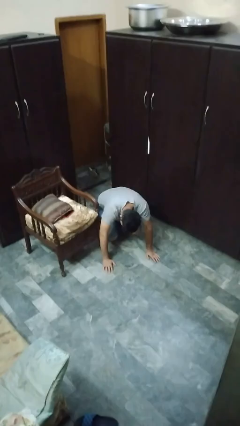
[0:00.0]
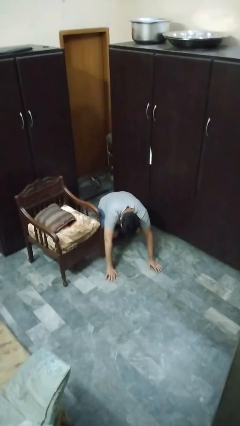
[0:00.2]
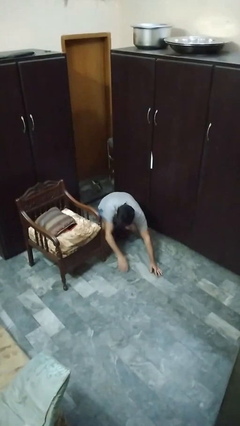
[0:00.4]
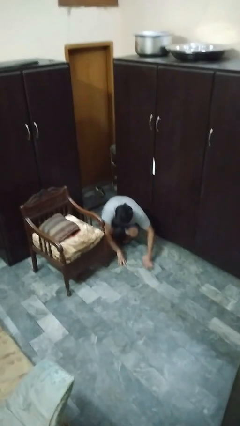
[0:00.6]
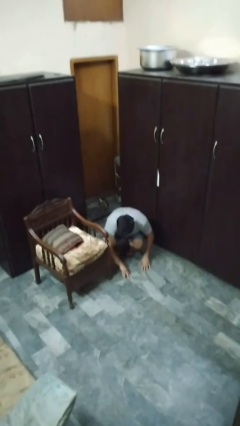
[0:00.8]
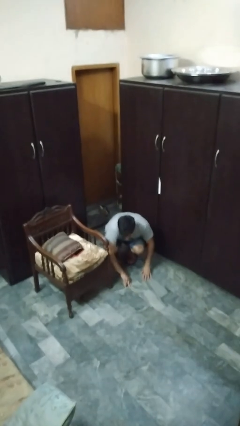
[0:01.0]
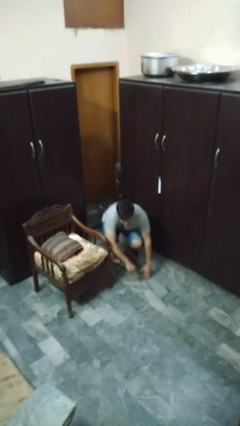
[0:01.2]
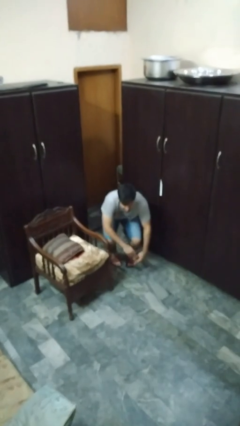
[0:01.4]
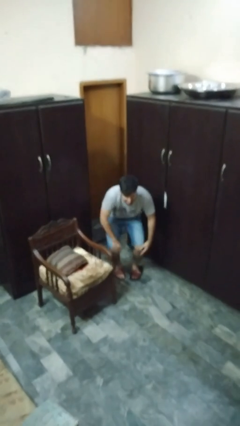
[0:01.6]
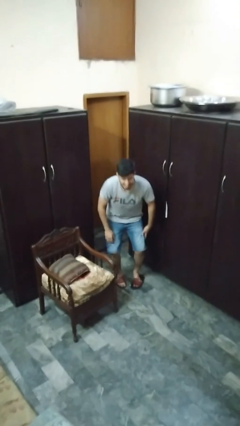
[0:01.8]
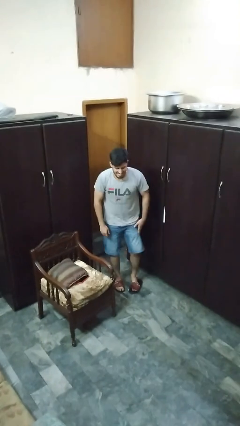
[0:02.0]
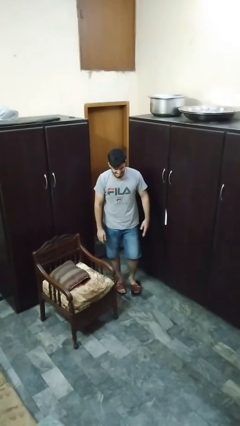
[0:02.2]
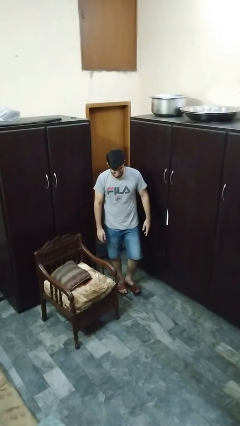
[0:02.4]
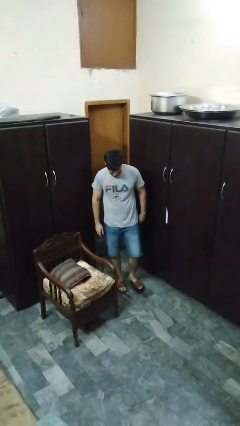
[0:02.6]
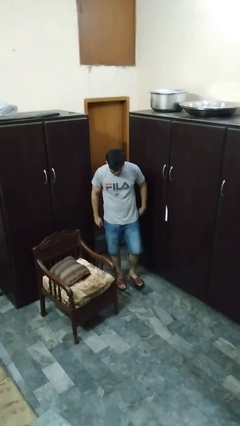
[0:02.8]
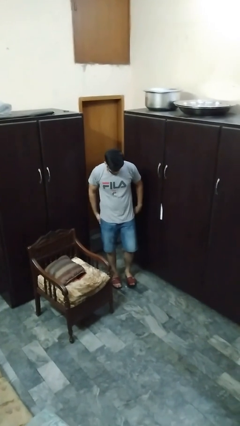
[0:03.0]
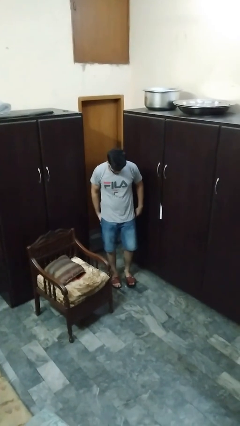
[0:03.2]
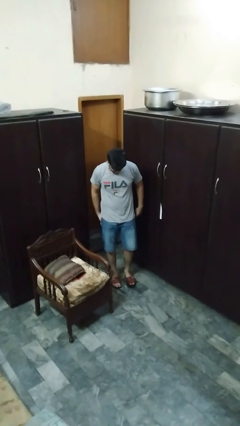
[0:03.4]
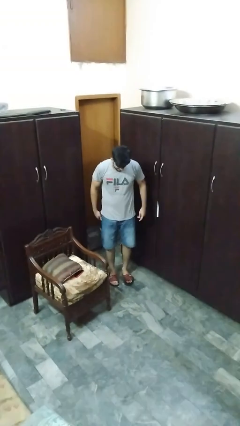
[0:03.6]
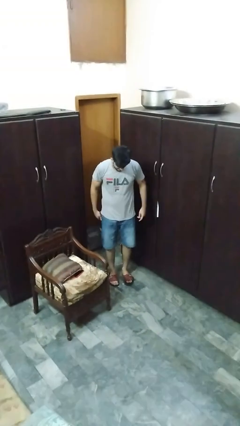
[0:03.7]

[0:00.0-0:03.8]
person stands up from floor

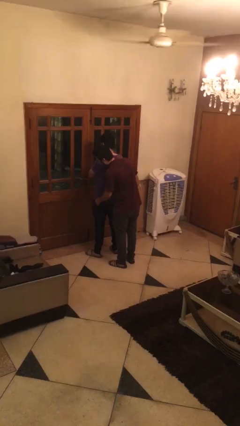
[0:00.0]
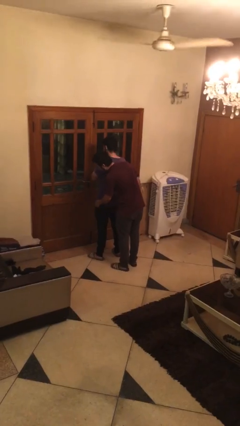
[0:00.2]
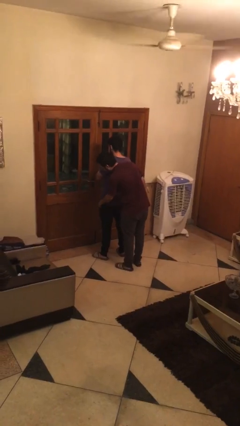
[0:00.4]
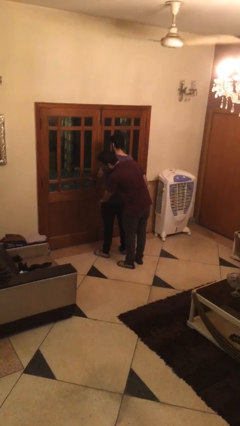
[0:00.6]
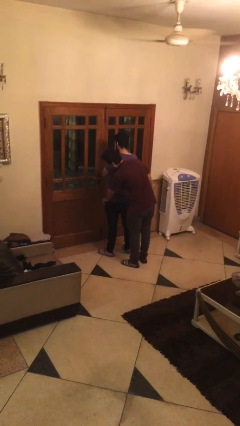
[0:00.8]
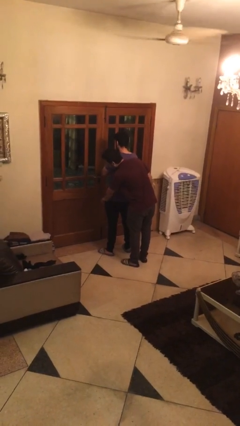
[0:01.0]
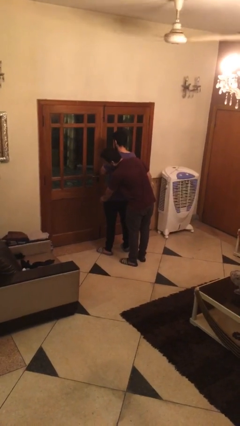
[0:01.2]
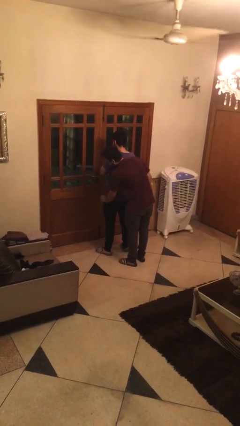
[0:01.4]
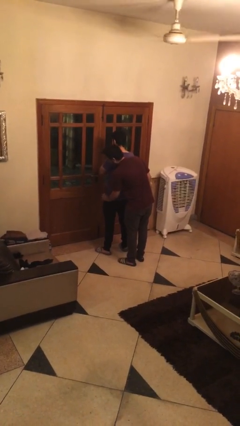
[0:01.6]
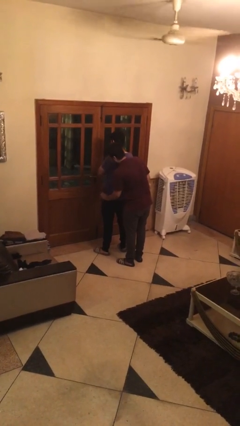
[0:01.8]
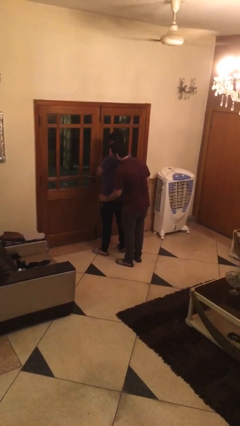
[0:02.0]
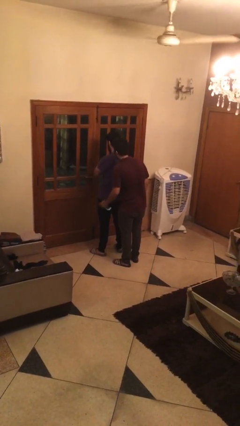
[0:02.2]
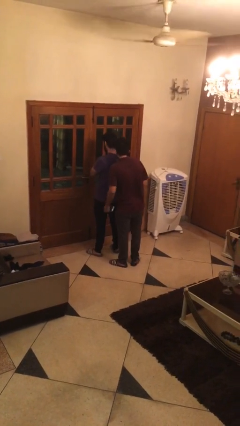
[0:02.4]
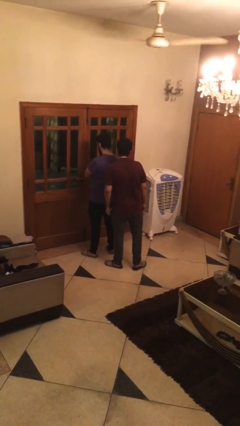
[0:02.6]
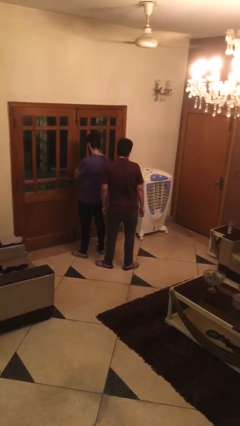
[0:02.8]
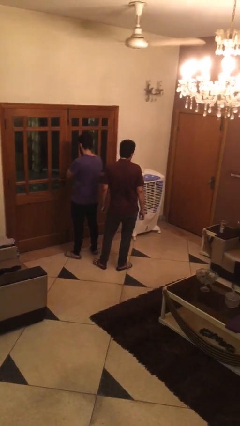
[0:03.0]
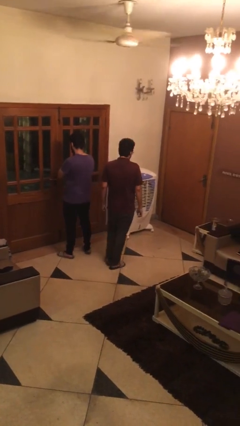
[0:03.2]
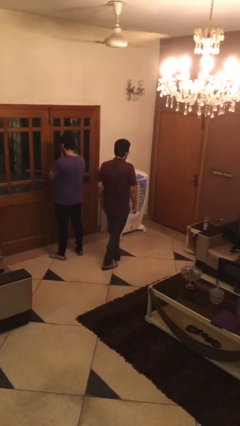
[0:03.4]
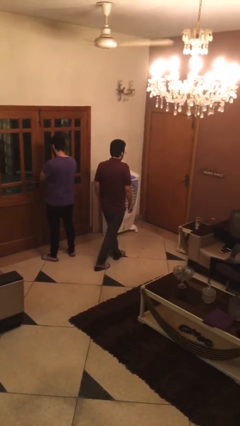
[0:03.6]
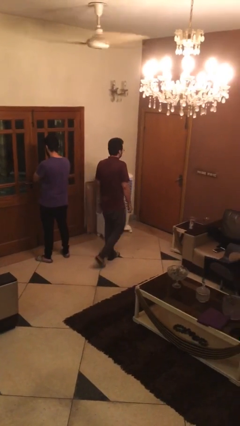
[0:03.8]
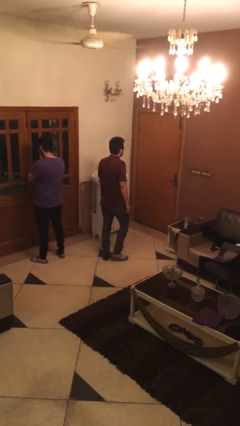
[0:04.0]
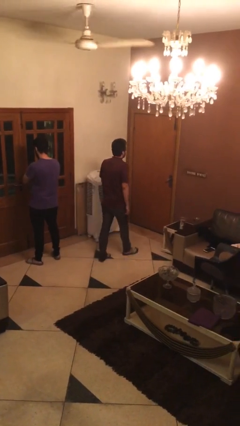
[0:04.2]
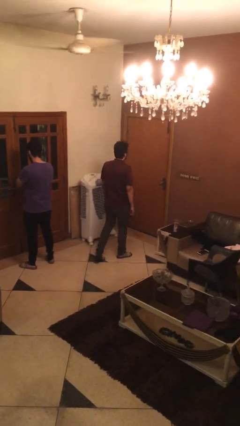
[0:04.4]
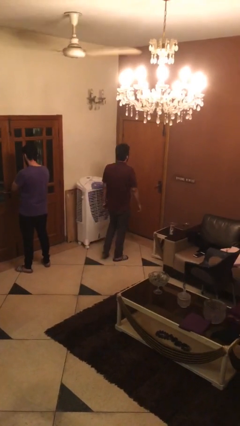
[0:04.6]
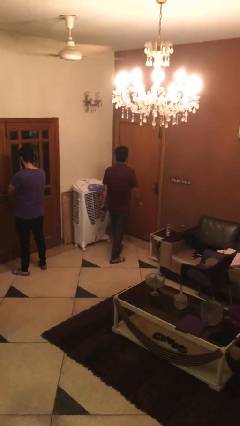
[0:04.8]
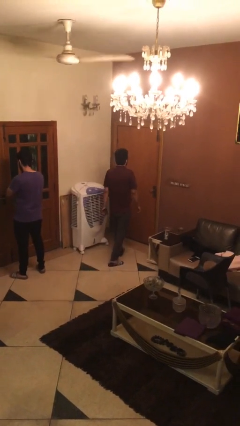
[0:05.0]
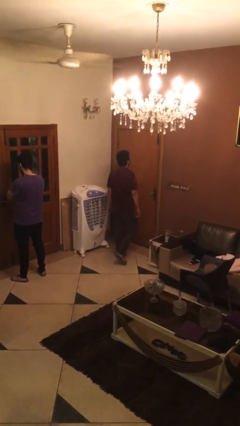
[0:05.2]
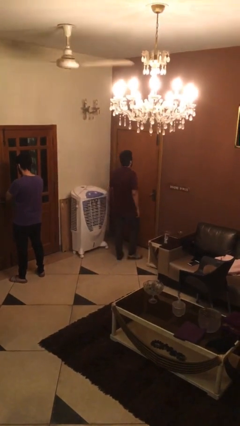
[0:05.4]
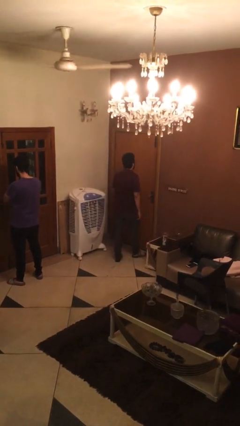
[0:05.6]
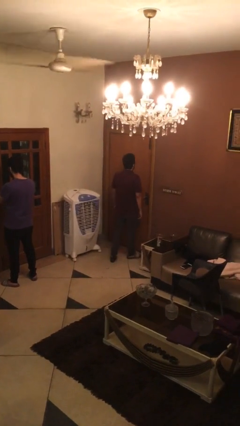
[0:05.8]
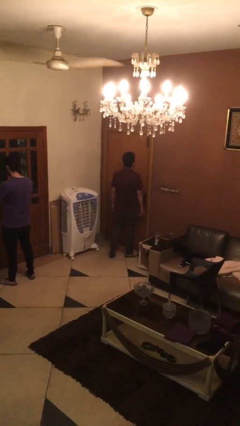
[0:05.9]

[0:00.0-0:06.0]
person steals object from person

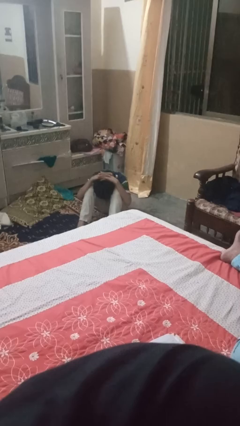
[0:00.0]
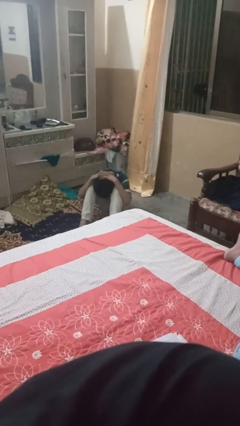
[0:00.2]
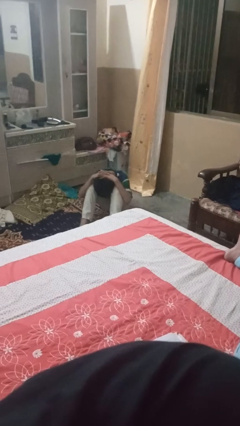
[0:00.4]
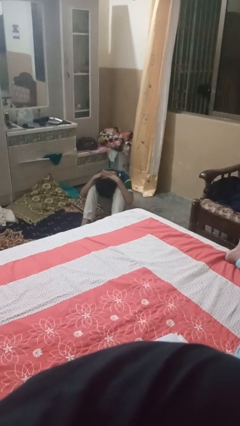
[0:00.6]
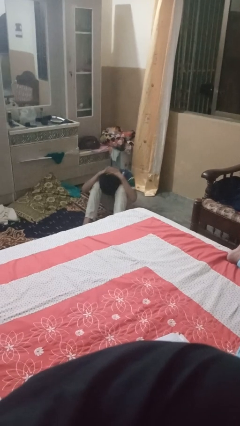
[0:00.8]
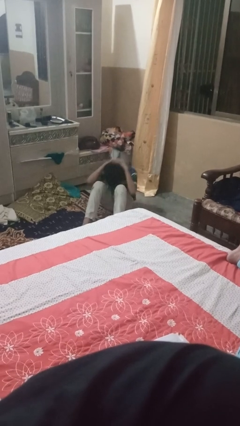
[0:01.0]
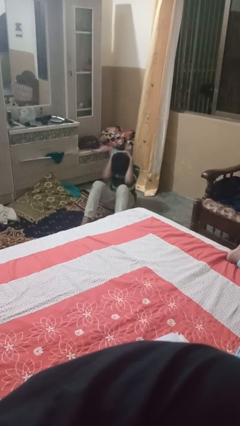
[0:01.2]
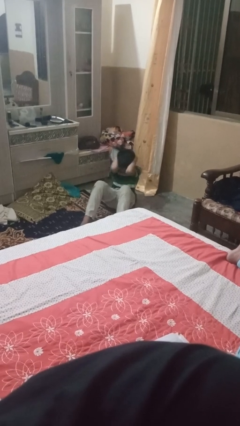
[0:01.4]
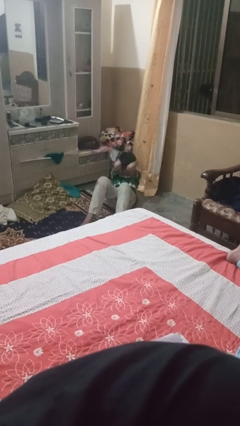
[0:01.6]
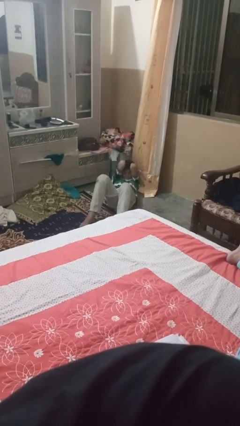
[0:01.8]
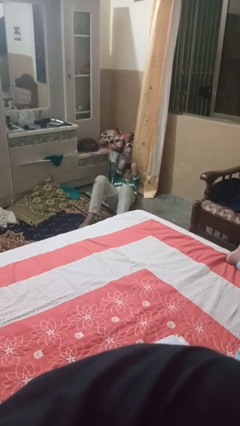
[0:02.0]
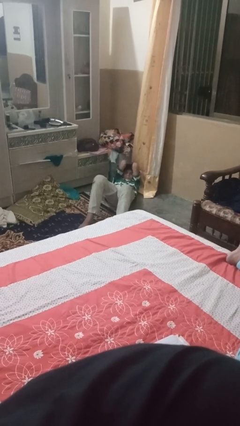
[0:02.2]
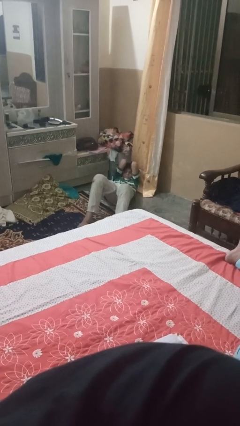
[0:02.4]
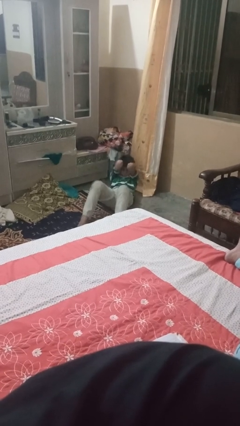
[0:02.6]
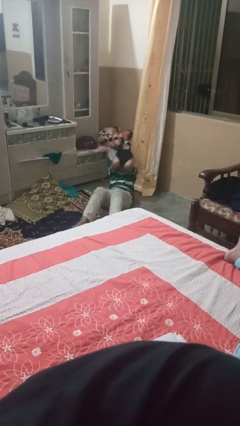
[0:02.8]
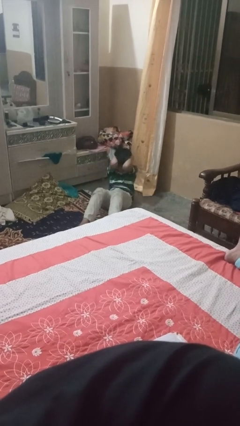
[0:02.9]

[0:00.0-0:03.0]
person exercises with situp

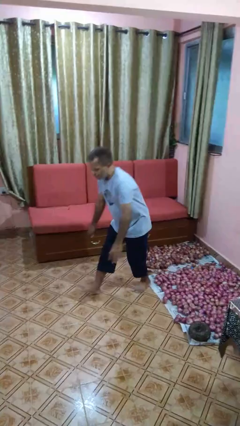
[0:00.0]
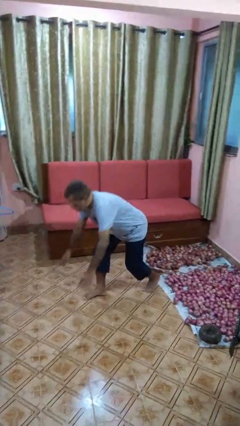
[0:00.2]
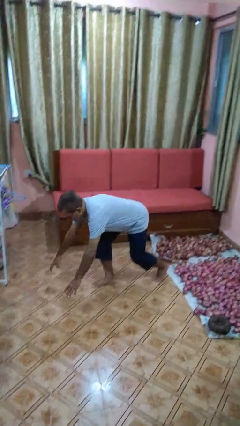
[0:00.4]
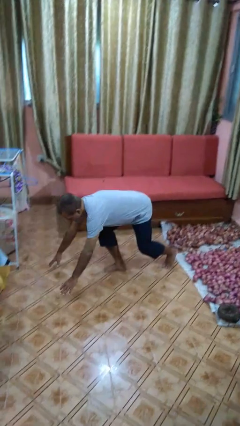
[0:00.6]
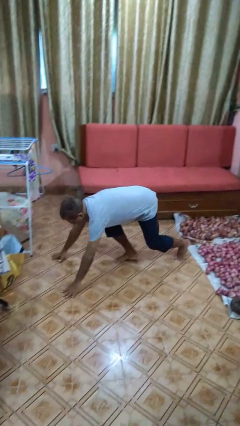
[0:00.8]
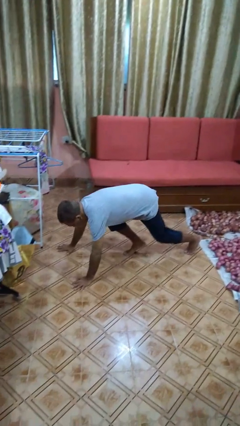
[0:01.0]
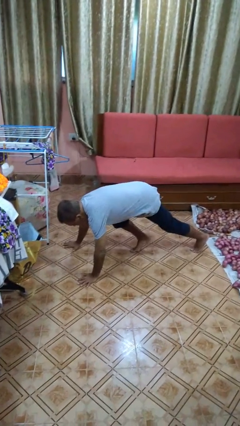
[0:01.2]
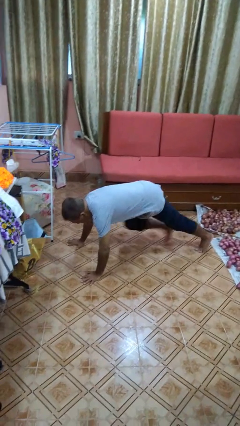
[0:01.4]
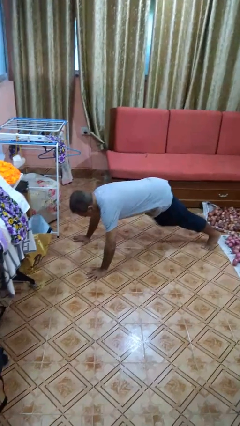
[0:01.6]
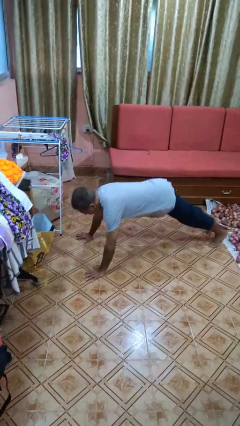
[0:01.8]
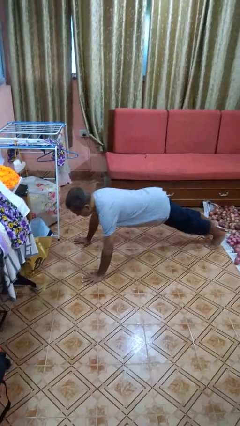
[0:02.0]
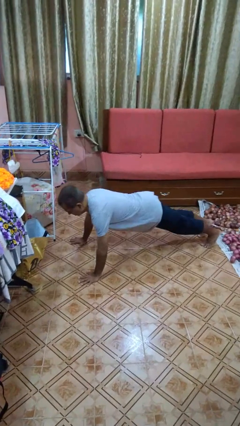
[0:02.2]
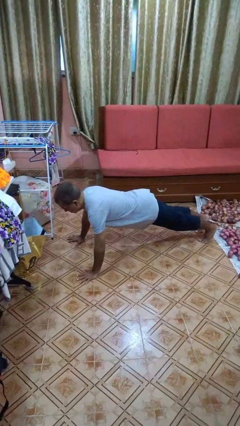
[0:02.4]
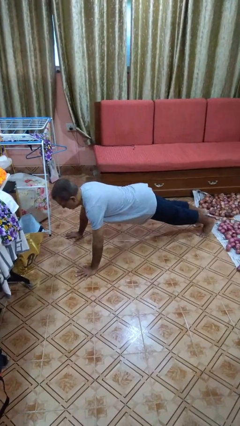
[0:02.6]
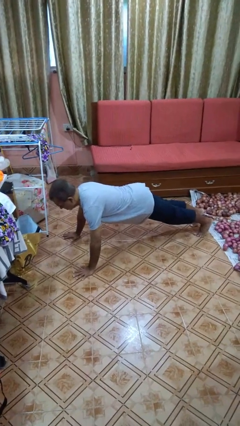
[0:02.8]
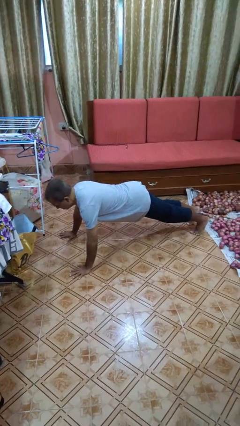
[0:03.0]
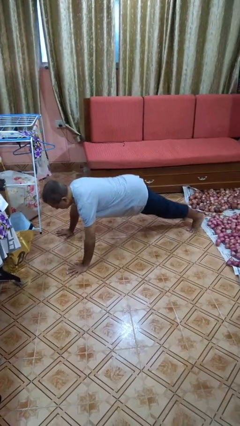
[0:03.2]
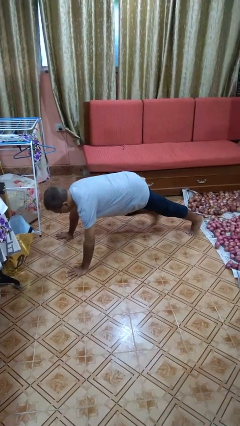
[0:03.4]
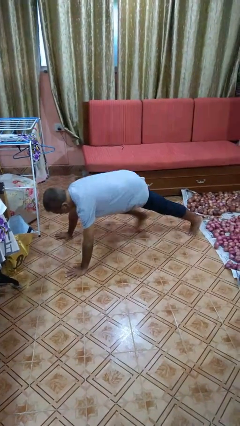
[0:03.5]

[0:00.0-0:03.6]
person exercises with plank

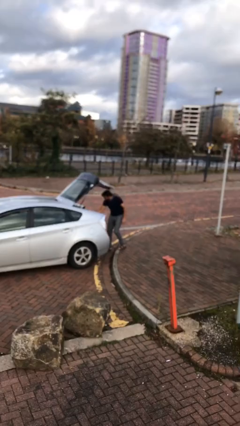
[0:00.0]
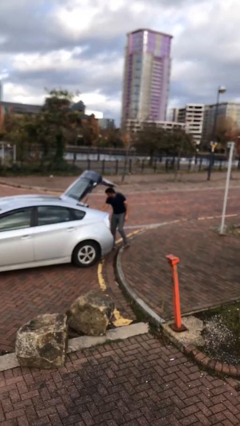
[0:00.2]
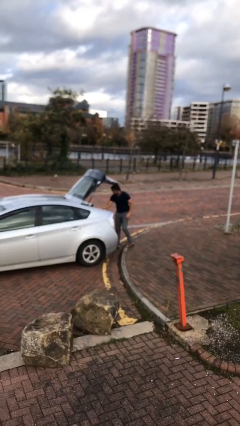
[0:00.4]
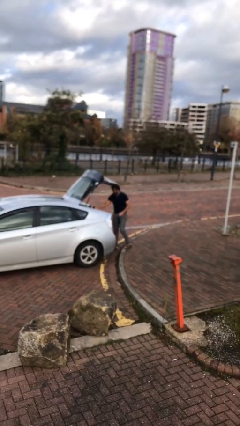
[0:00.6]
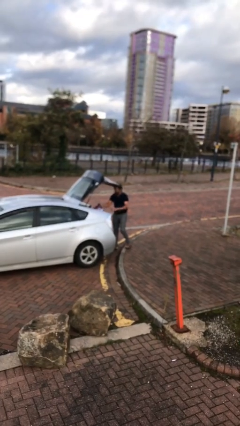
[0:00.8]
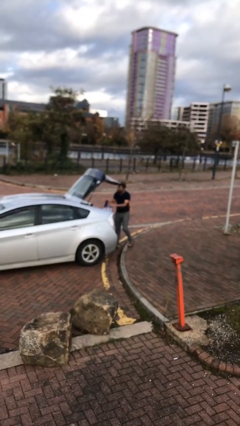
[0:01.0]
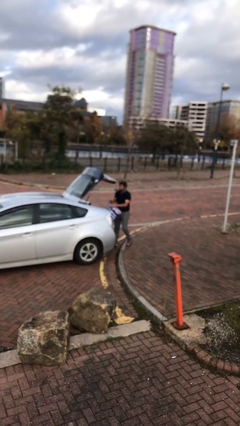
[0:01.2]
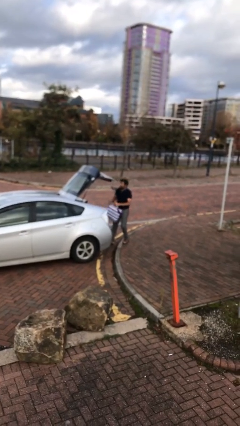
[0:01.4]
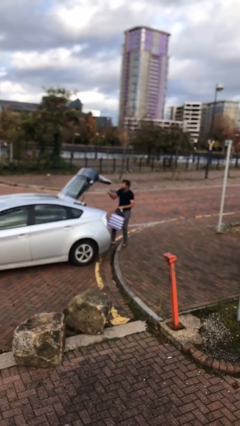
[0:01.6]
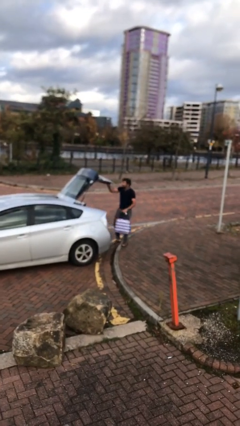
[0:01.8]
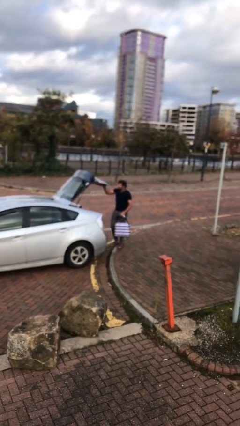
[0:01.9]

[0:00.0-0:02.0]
person unloads car
